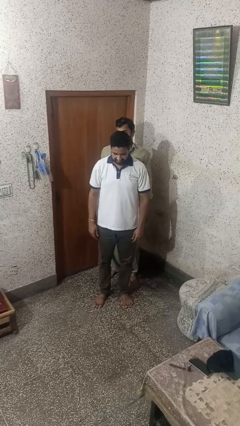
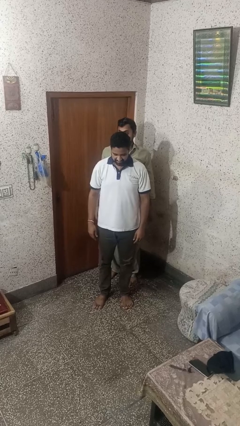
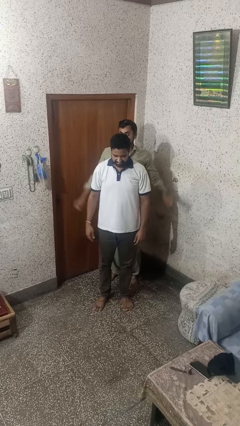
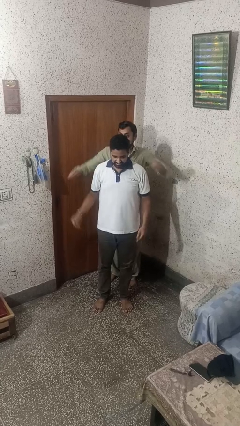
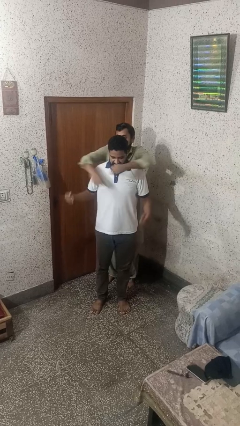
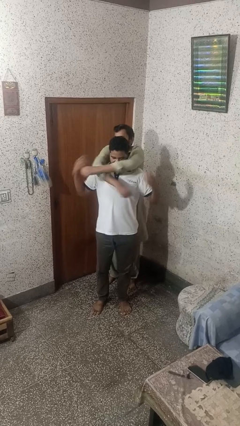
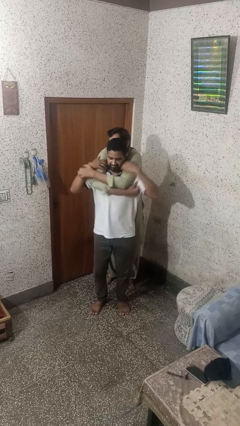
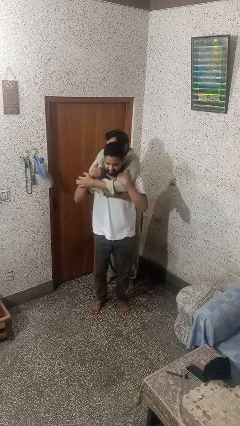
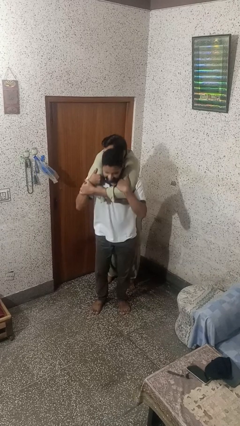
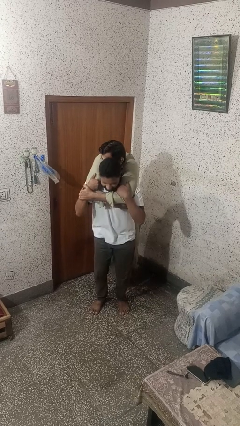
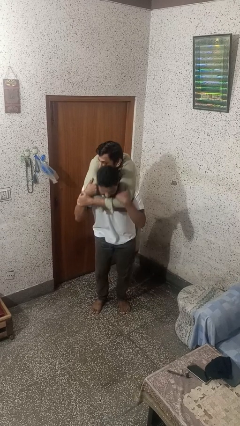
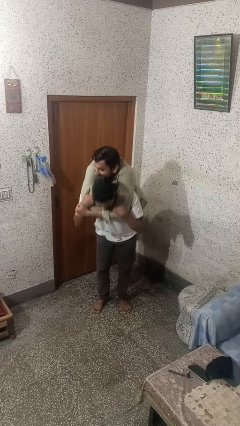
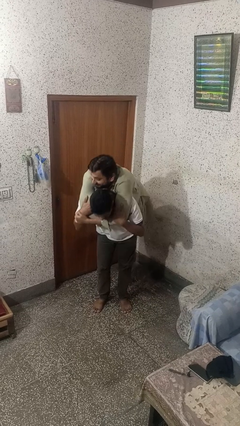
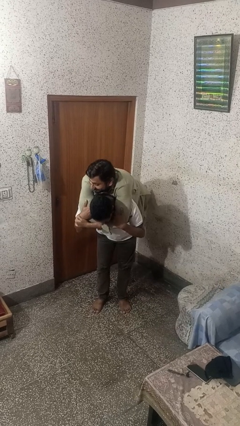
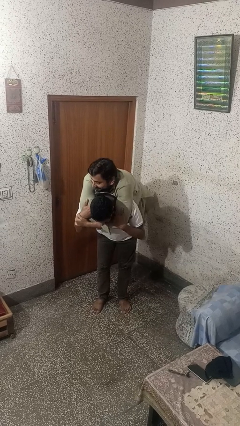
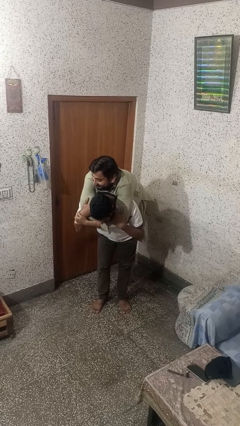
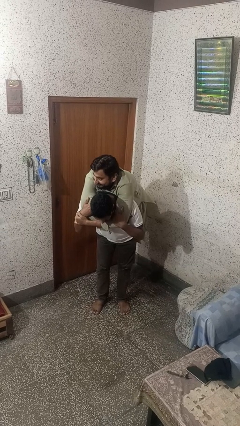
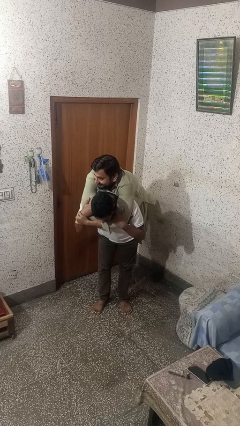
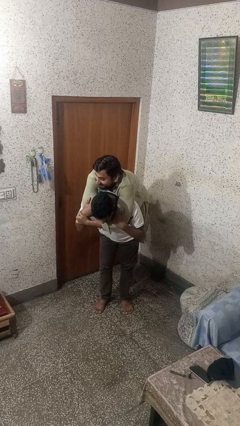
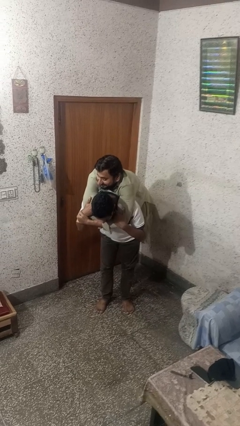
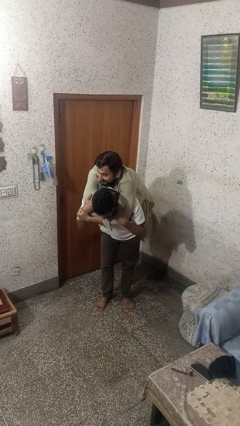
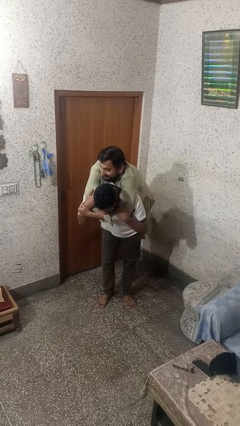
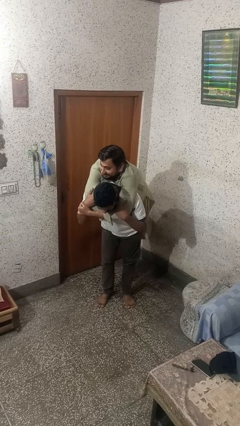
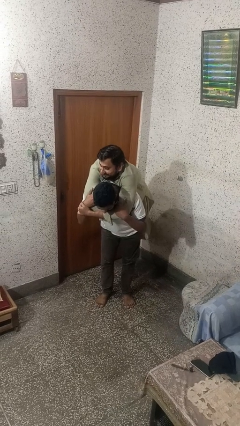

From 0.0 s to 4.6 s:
person carries person on back

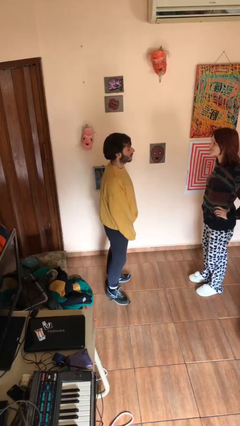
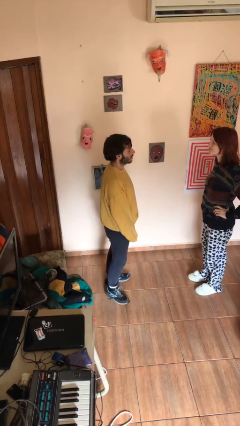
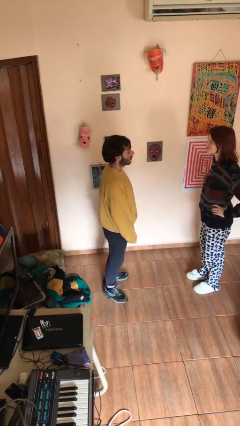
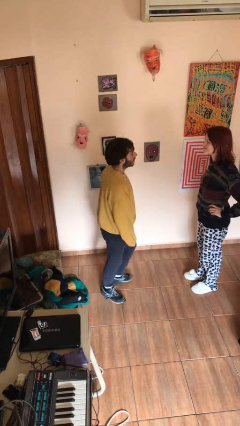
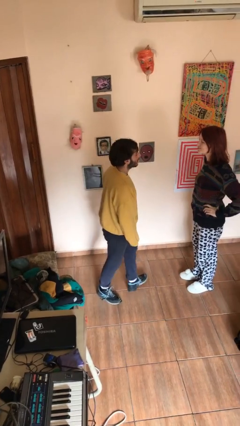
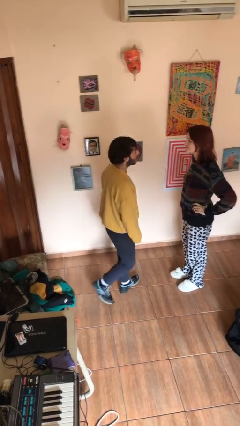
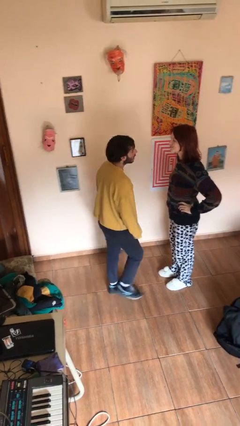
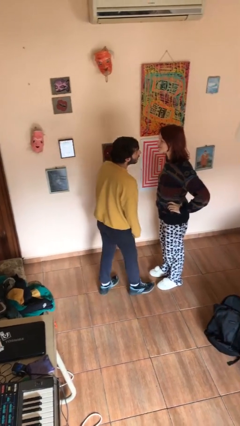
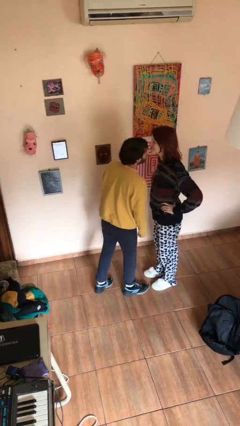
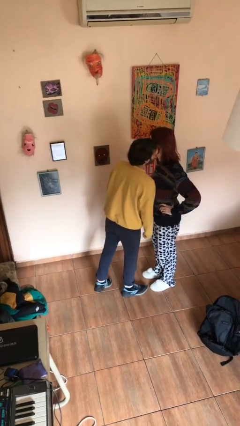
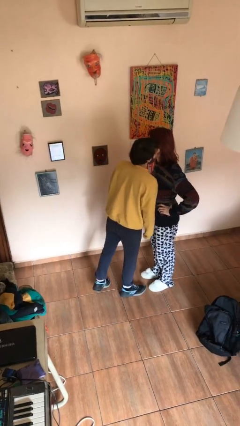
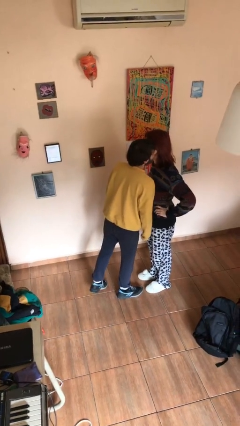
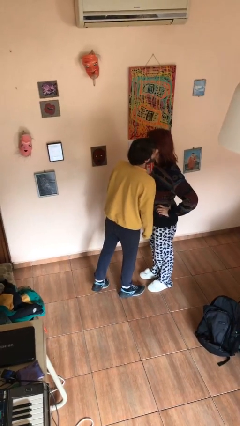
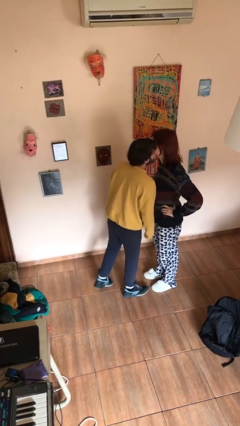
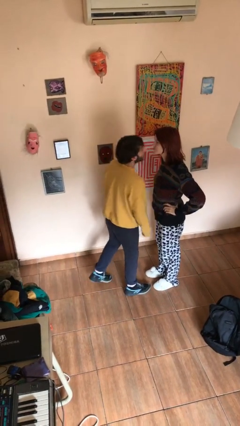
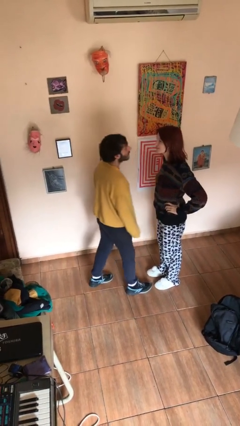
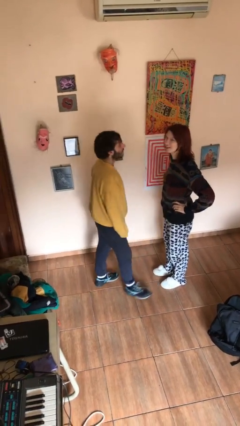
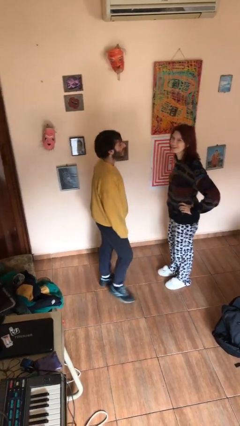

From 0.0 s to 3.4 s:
person kisses cheek of person

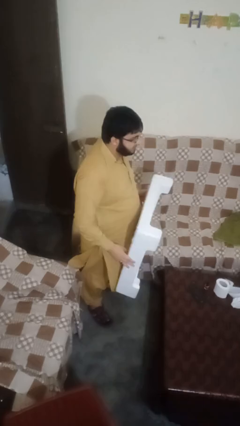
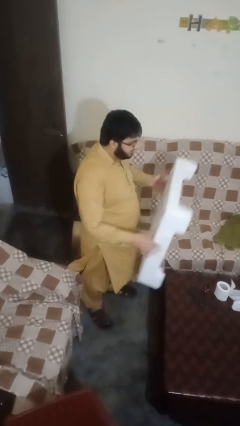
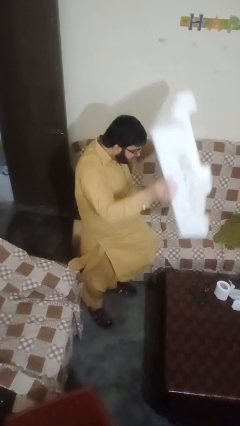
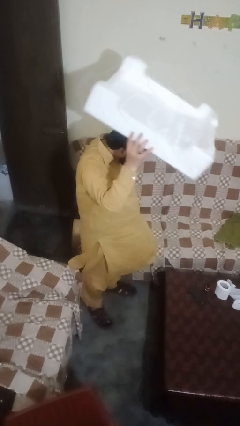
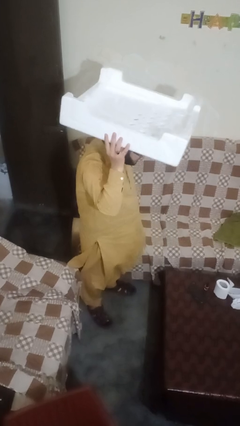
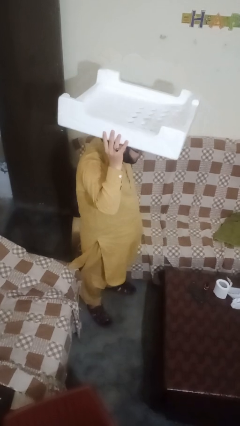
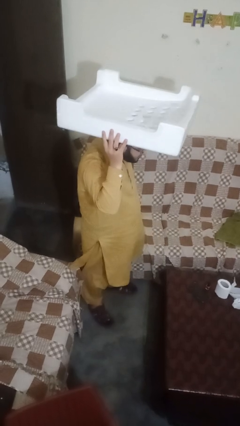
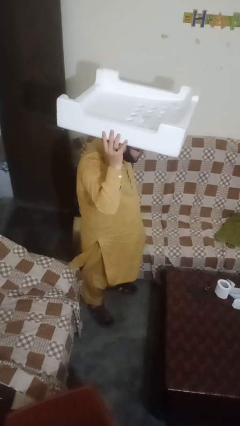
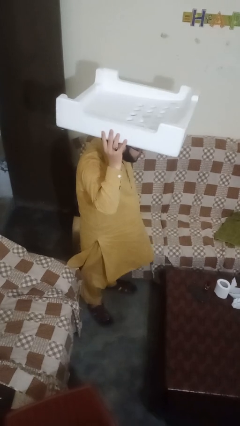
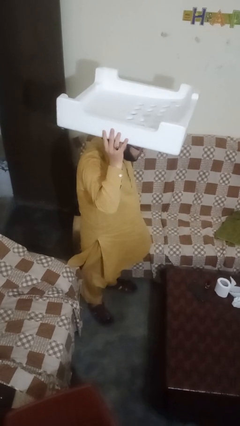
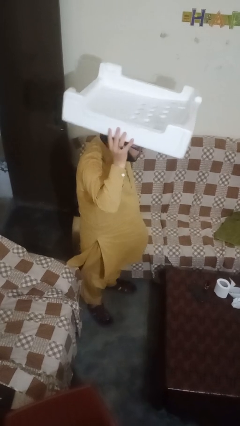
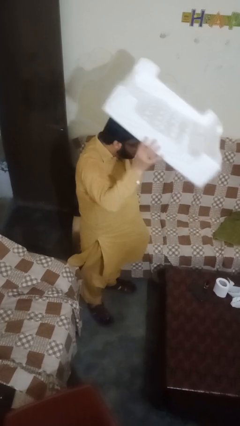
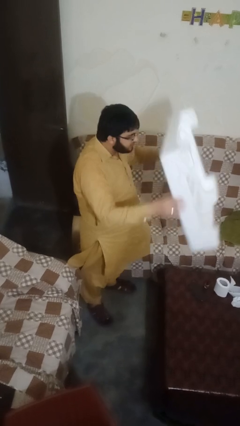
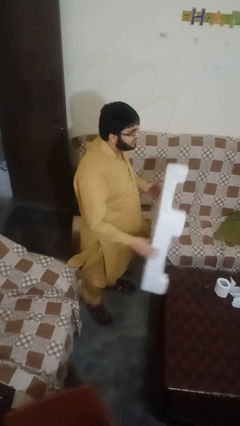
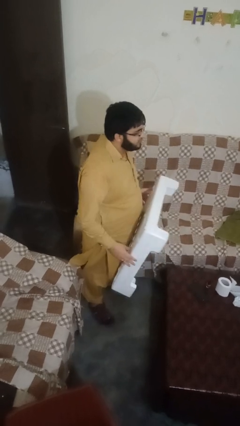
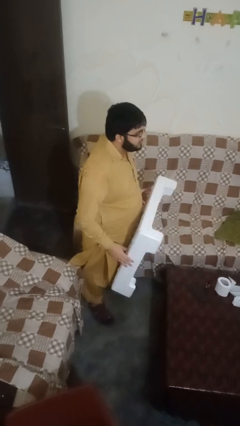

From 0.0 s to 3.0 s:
person holds object above head

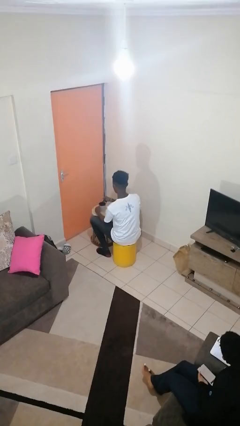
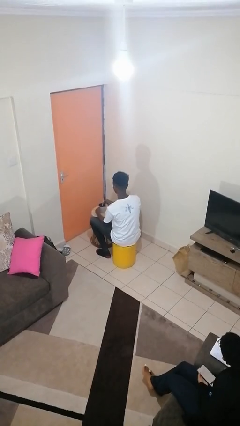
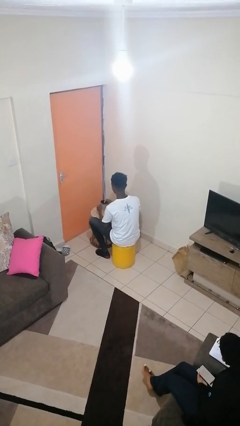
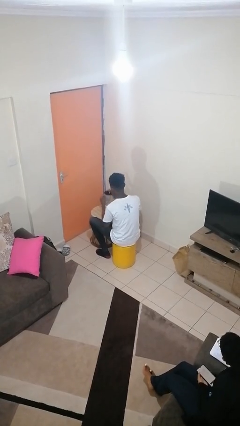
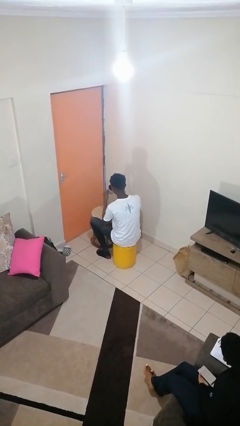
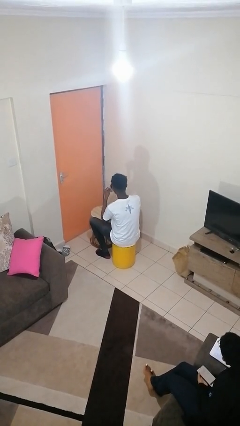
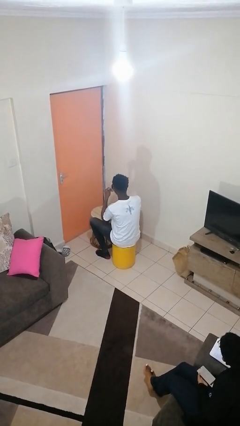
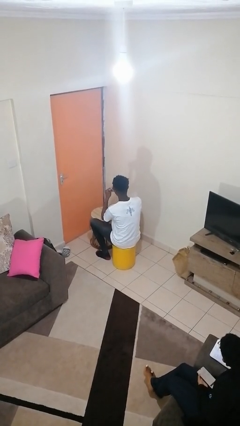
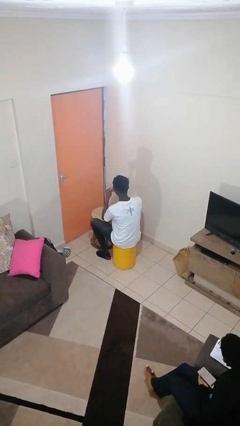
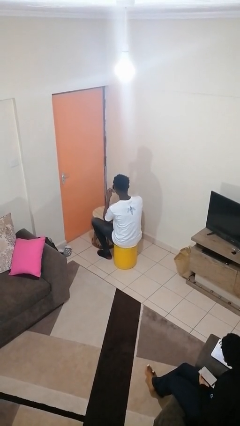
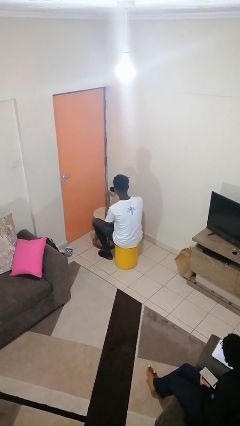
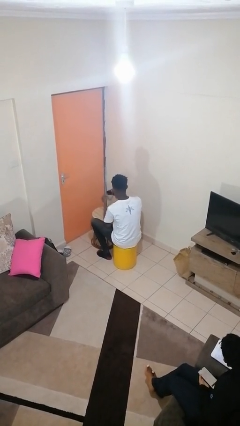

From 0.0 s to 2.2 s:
person drinks from mug

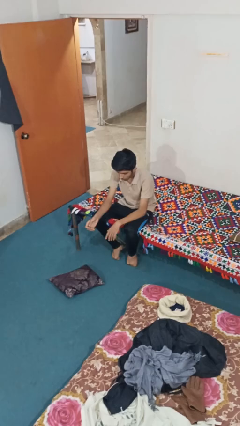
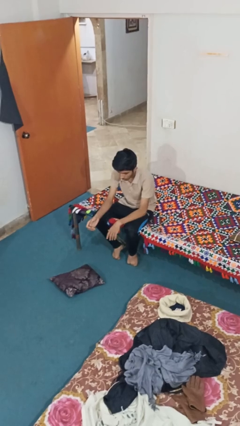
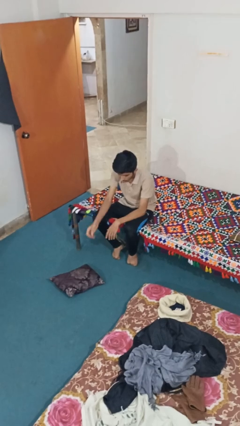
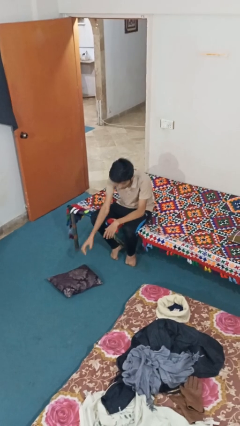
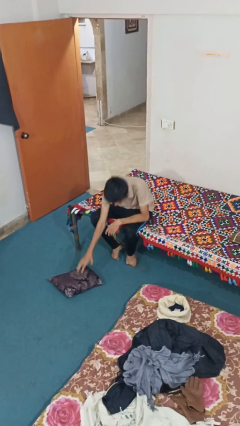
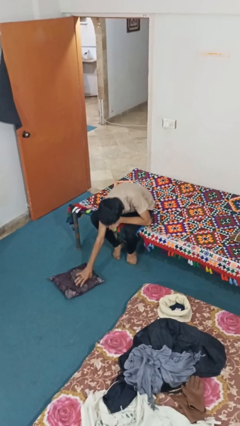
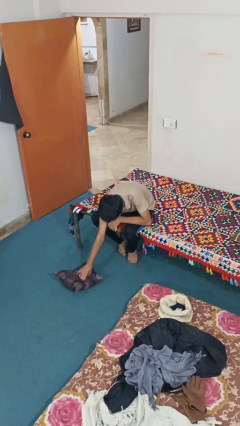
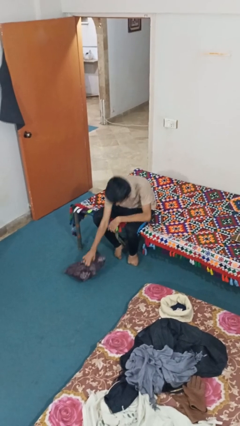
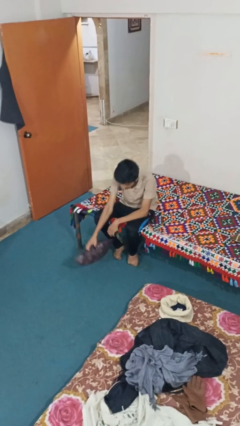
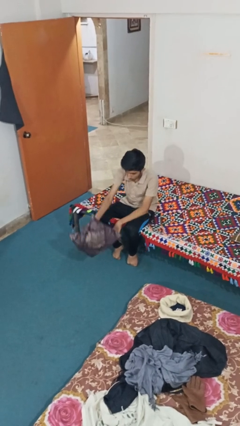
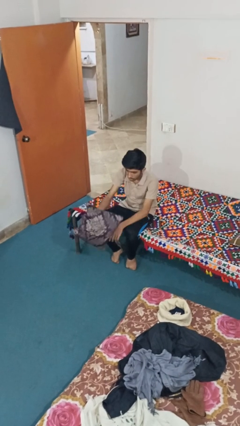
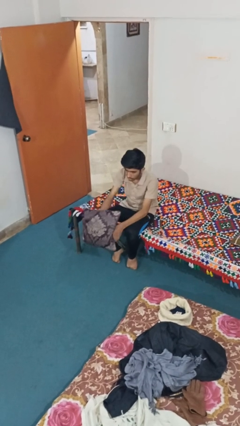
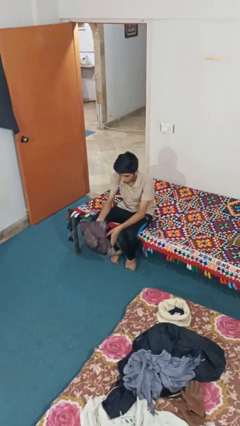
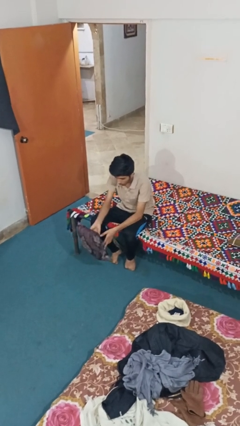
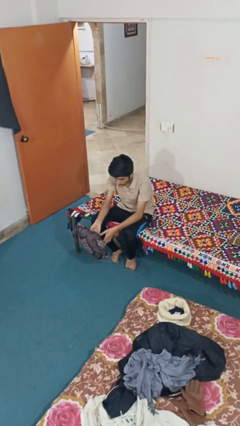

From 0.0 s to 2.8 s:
person picks up object from floor

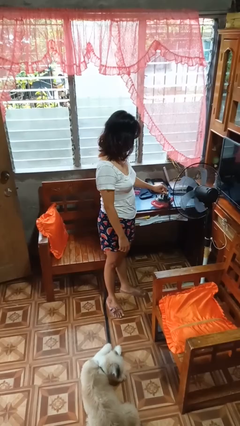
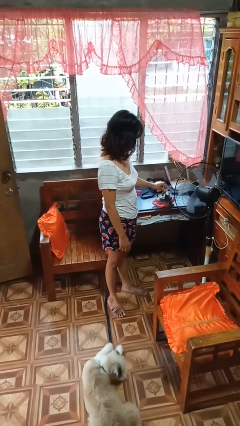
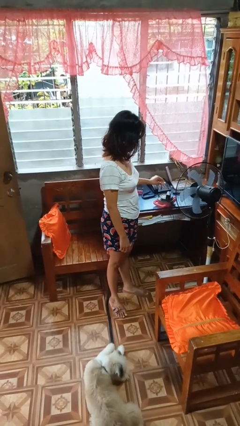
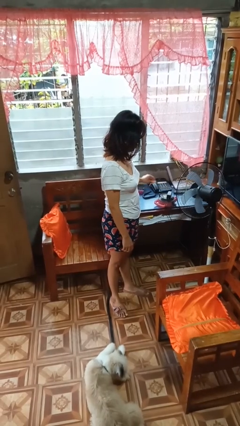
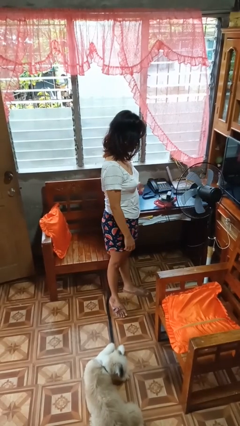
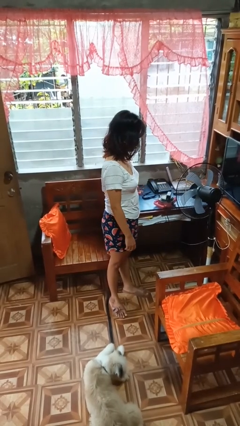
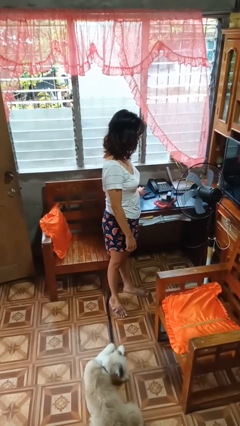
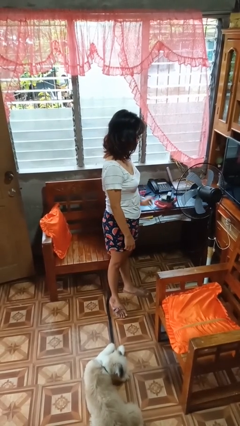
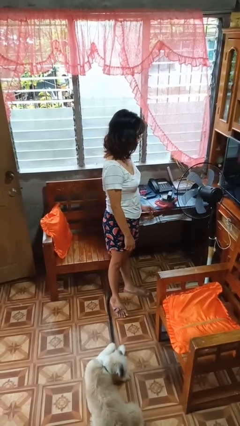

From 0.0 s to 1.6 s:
person unplugs from electrical socket
